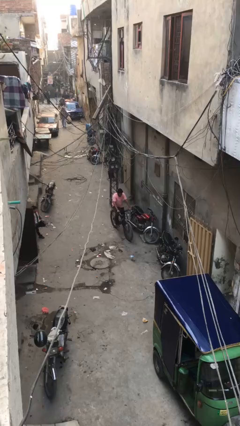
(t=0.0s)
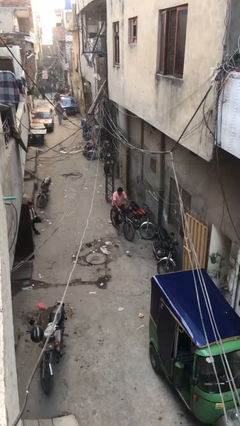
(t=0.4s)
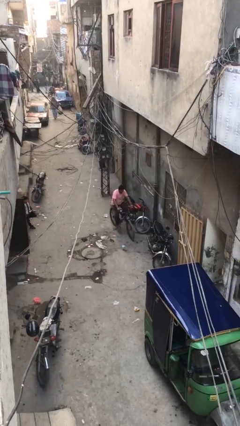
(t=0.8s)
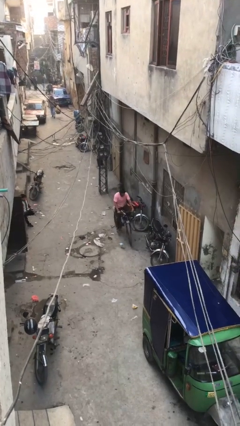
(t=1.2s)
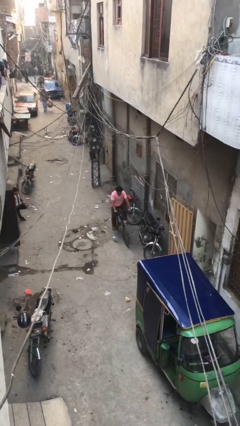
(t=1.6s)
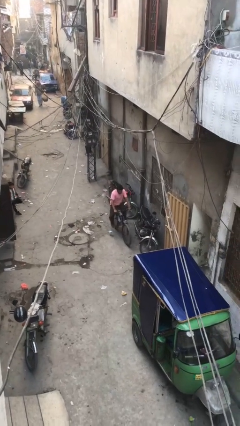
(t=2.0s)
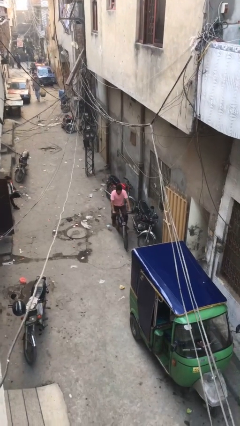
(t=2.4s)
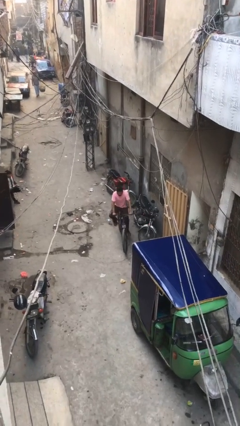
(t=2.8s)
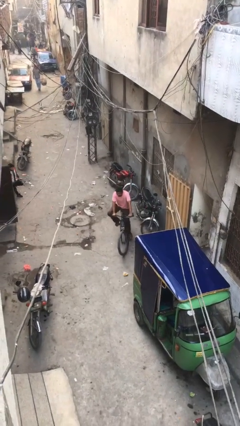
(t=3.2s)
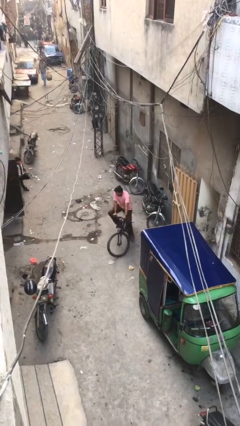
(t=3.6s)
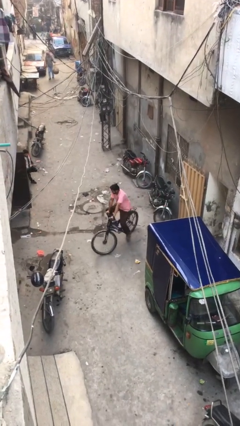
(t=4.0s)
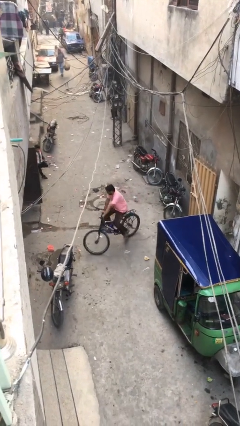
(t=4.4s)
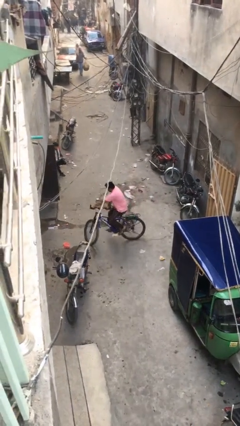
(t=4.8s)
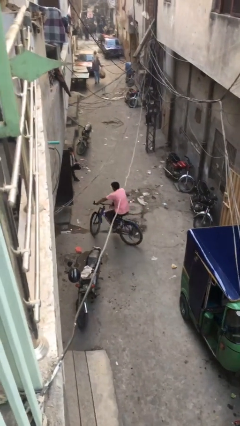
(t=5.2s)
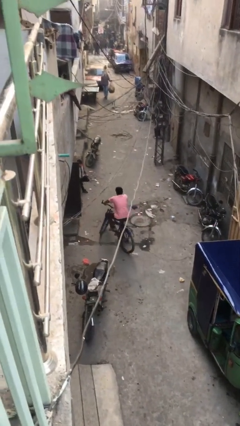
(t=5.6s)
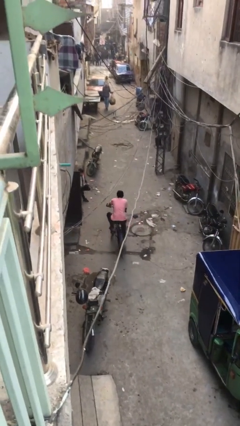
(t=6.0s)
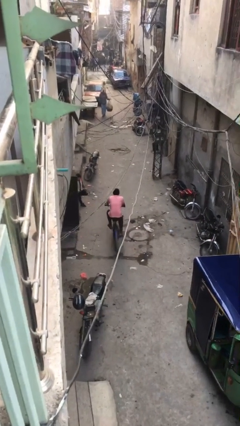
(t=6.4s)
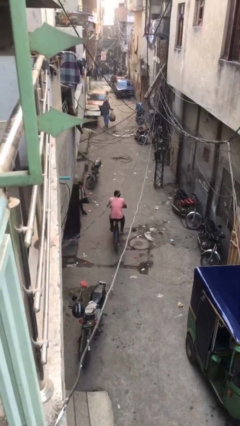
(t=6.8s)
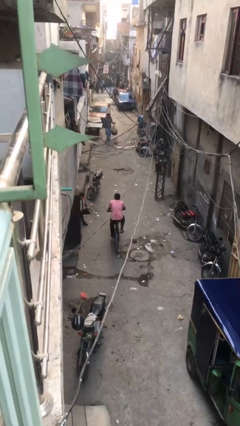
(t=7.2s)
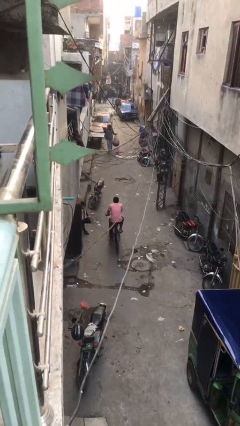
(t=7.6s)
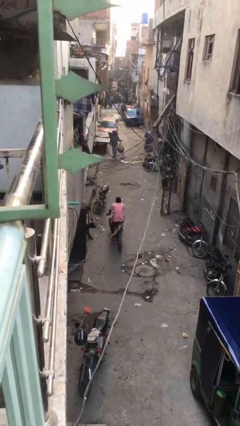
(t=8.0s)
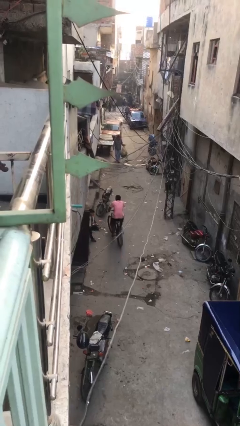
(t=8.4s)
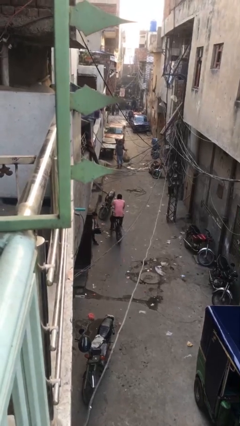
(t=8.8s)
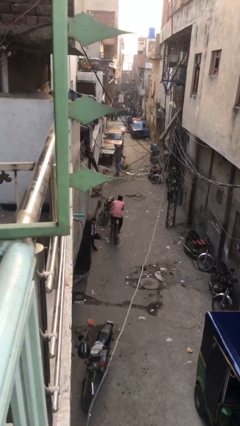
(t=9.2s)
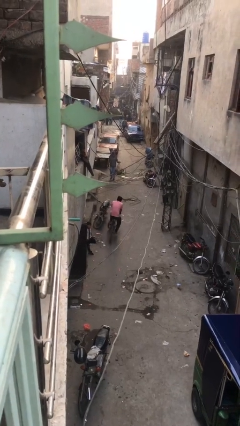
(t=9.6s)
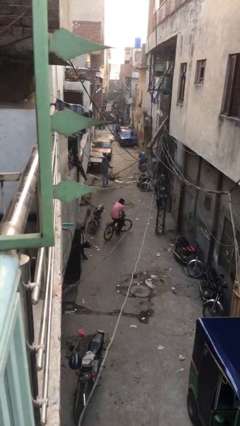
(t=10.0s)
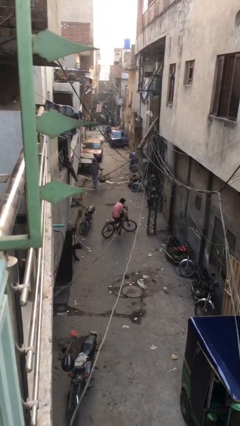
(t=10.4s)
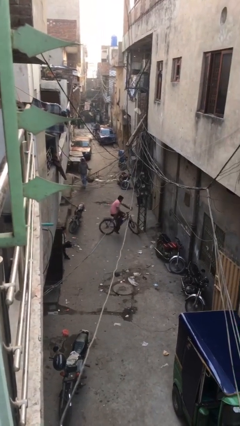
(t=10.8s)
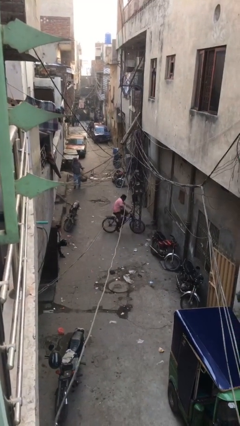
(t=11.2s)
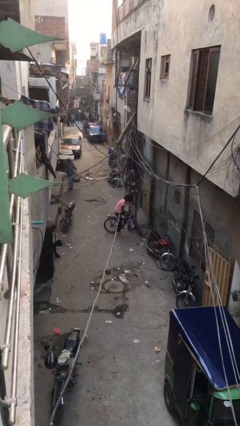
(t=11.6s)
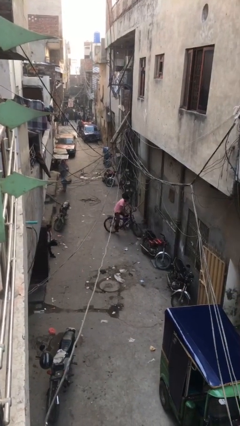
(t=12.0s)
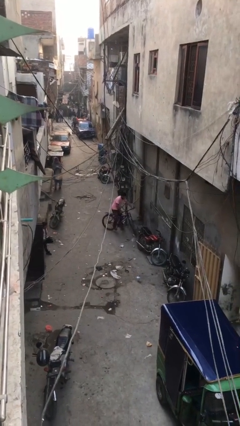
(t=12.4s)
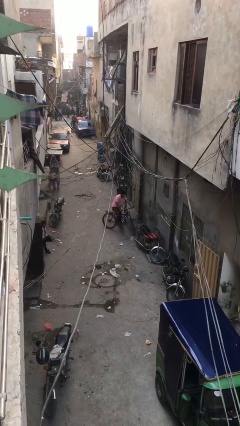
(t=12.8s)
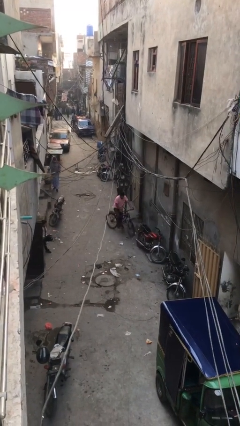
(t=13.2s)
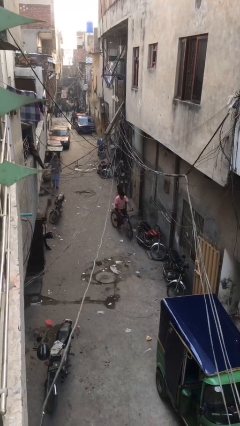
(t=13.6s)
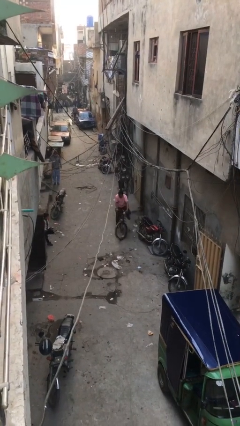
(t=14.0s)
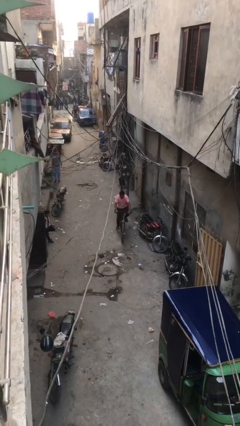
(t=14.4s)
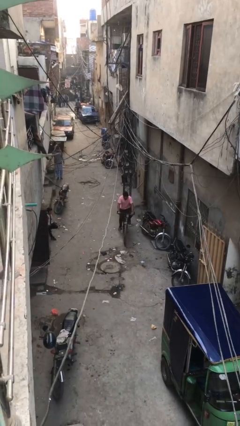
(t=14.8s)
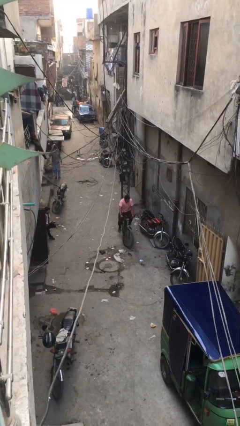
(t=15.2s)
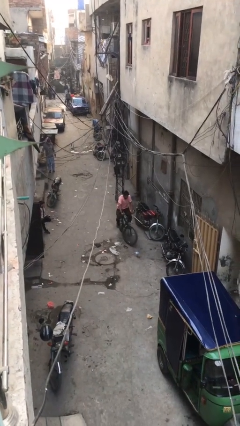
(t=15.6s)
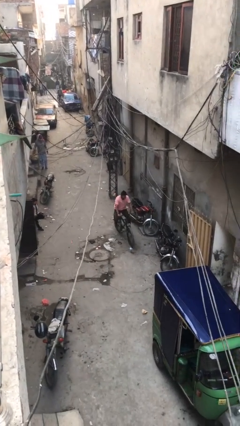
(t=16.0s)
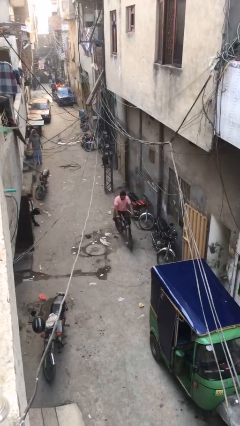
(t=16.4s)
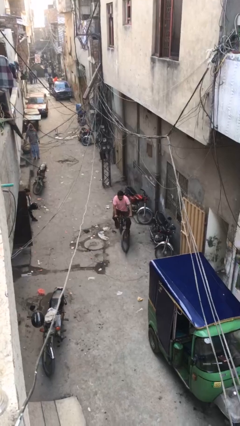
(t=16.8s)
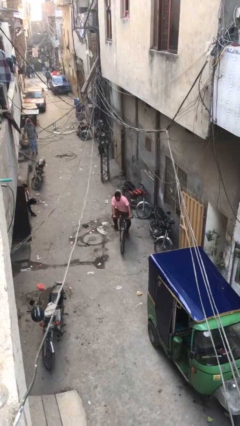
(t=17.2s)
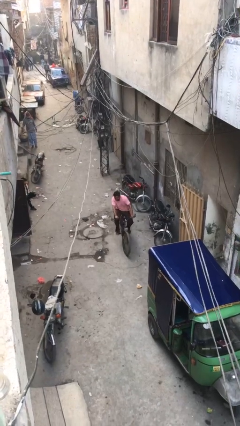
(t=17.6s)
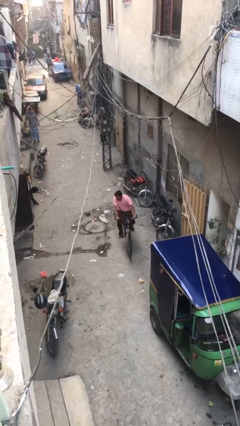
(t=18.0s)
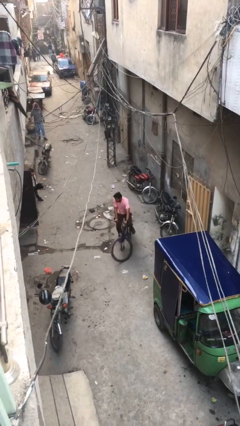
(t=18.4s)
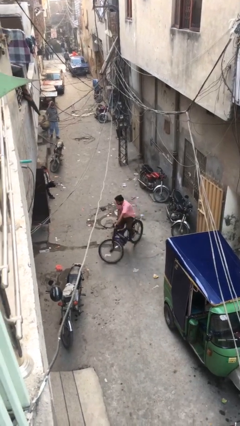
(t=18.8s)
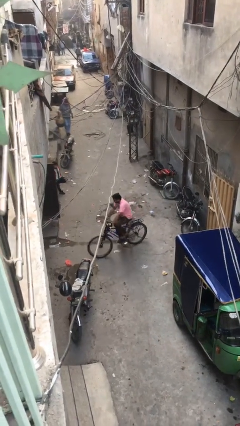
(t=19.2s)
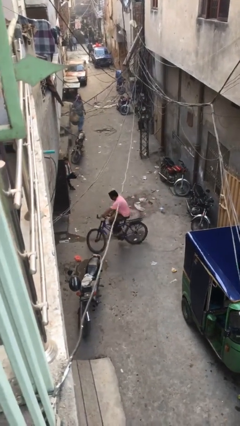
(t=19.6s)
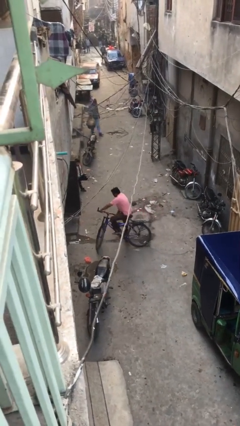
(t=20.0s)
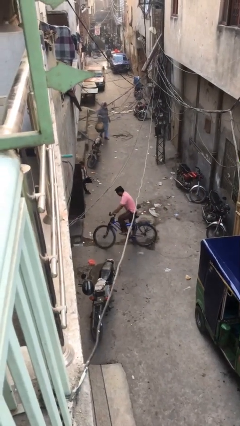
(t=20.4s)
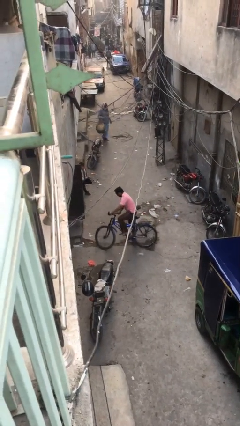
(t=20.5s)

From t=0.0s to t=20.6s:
person rides bicycle

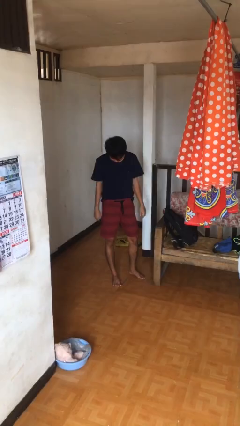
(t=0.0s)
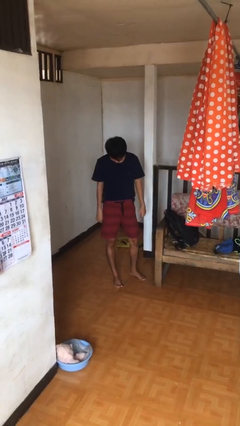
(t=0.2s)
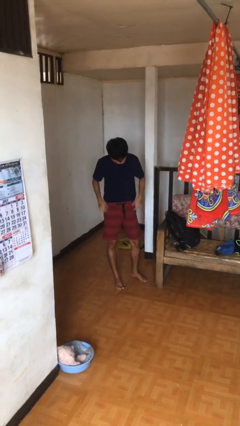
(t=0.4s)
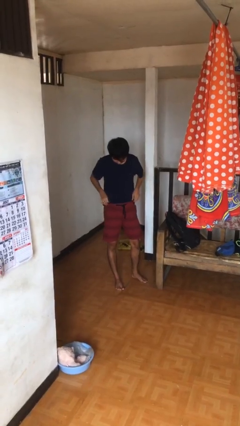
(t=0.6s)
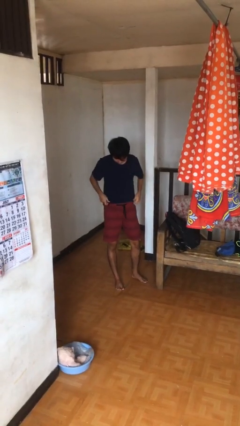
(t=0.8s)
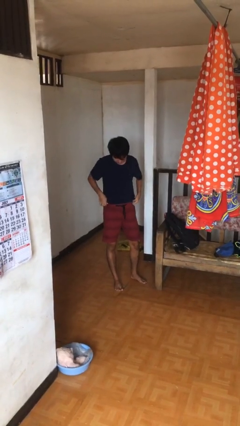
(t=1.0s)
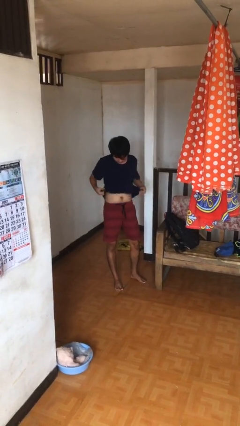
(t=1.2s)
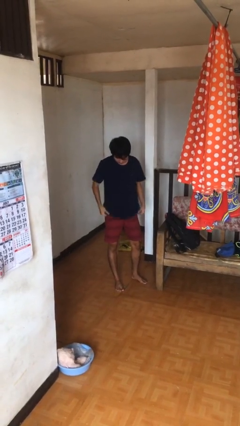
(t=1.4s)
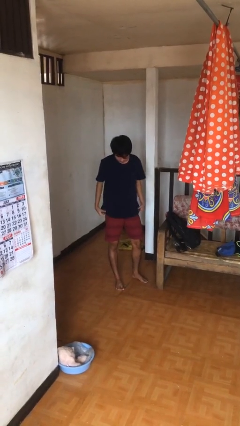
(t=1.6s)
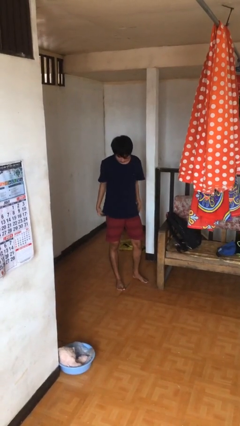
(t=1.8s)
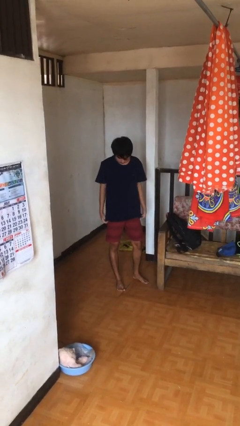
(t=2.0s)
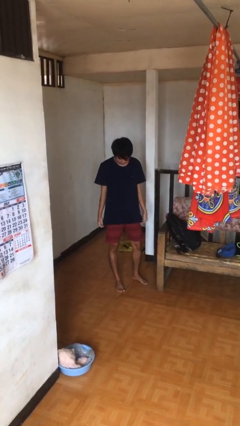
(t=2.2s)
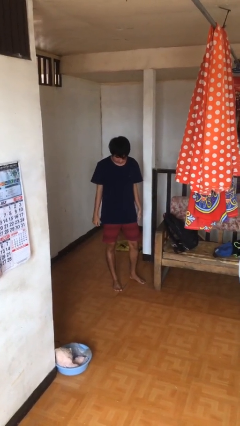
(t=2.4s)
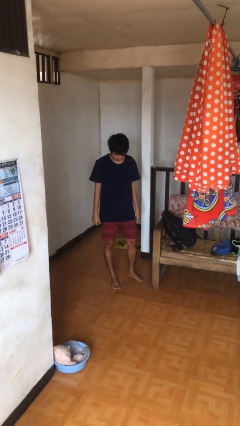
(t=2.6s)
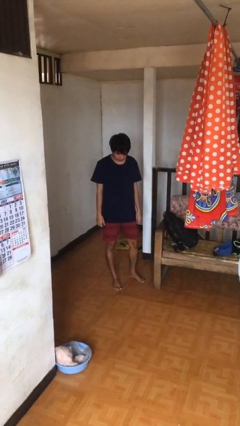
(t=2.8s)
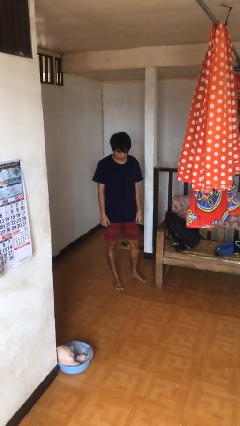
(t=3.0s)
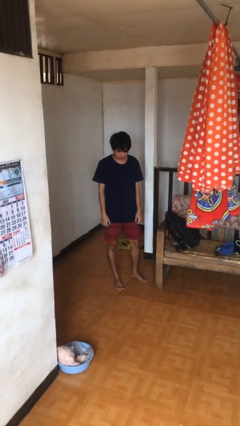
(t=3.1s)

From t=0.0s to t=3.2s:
person untucks shirt

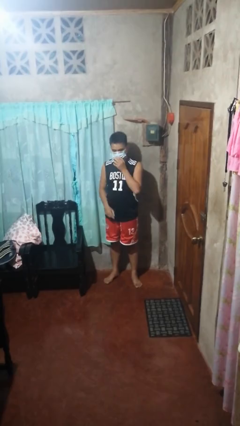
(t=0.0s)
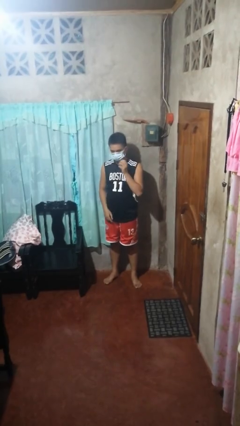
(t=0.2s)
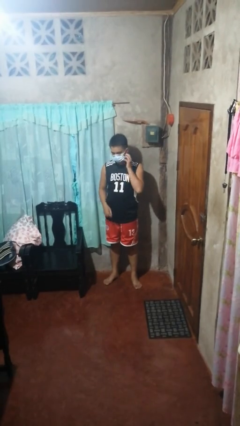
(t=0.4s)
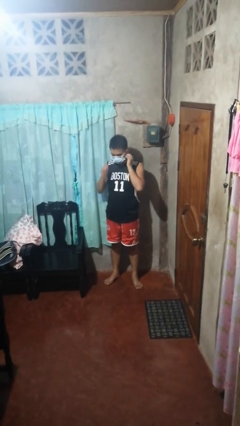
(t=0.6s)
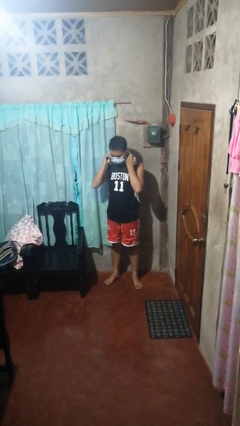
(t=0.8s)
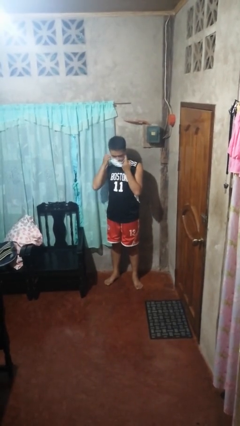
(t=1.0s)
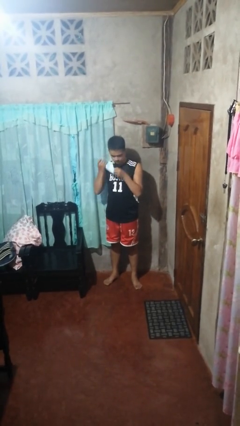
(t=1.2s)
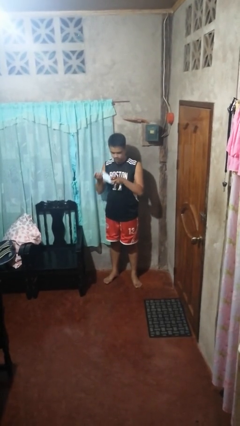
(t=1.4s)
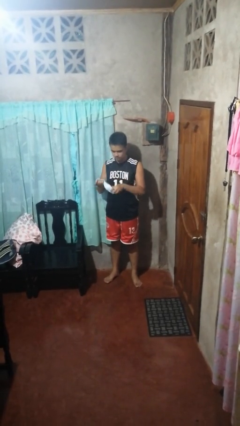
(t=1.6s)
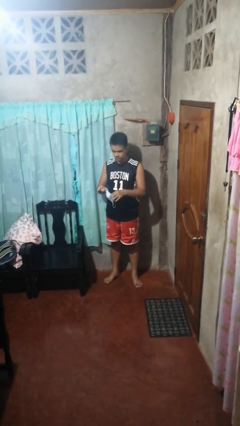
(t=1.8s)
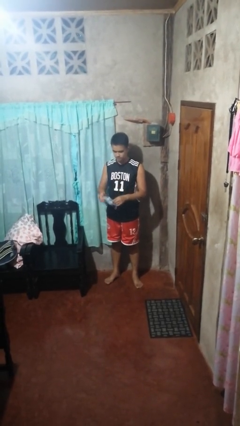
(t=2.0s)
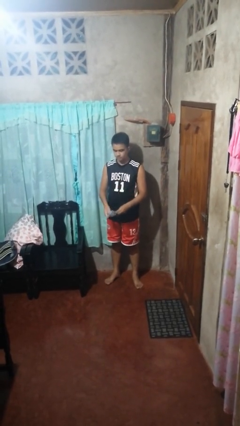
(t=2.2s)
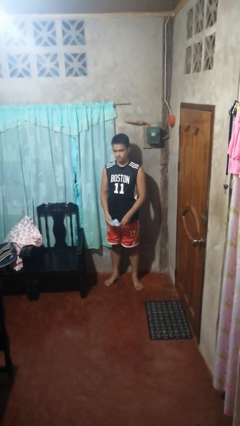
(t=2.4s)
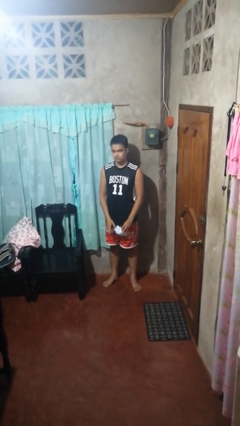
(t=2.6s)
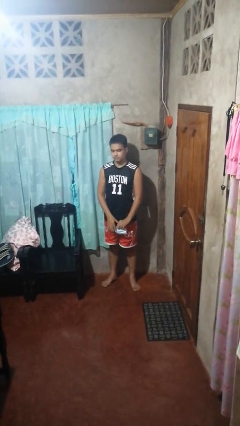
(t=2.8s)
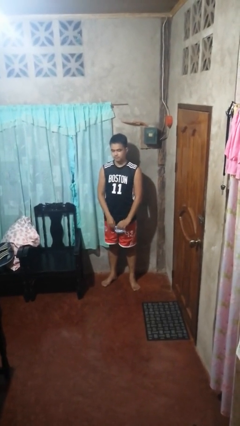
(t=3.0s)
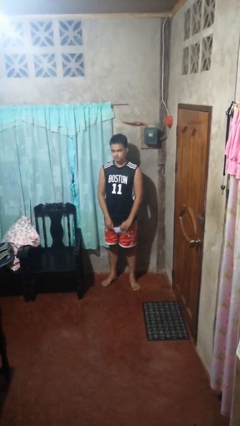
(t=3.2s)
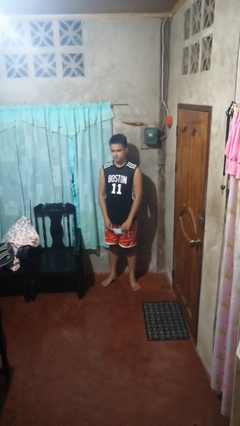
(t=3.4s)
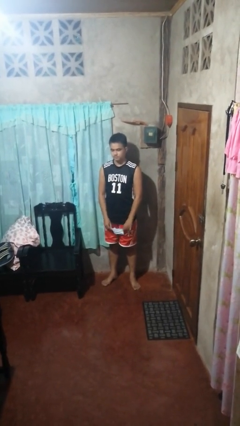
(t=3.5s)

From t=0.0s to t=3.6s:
person takes off facemask

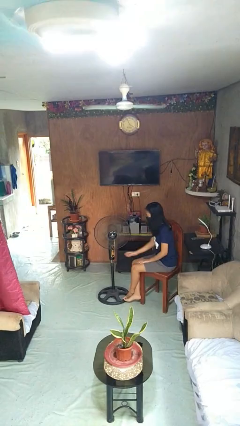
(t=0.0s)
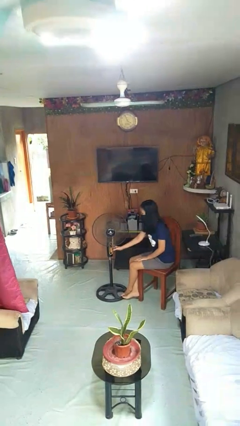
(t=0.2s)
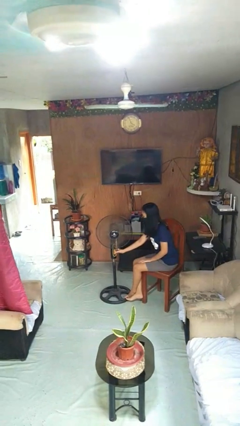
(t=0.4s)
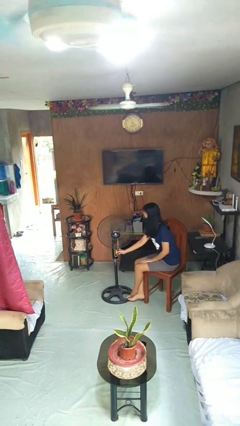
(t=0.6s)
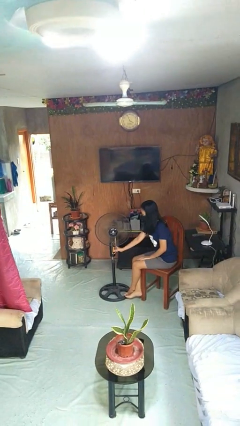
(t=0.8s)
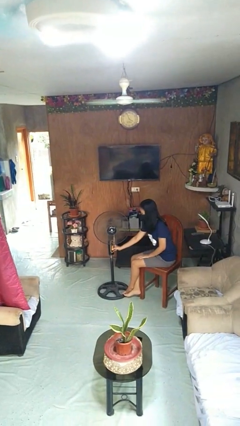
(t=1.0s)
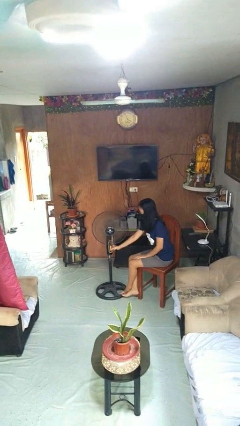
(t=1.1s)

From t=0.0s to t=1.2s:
person turns on fan
